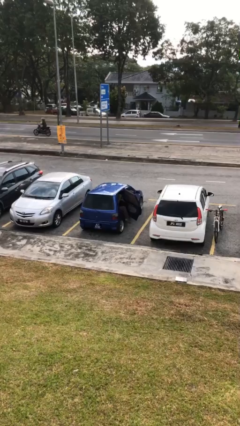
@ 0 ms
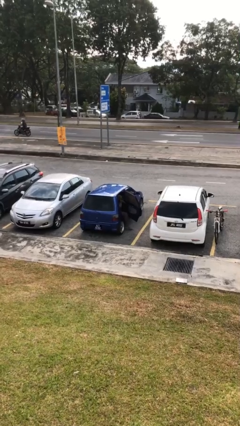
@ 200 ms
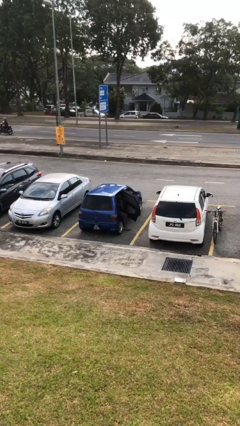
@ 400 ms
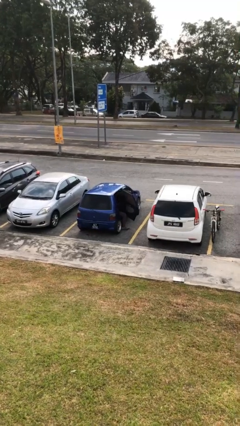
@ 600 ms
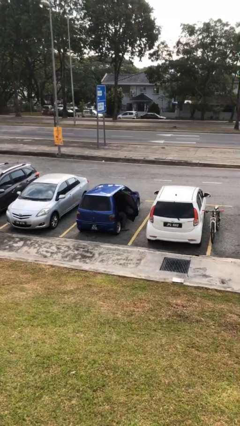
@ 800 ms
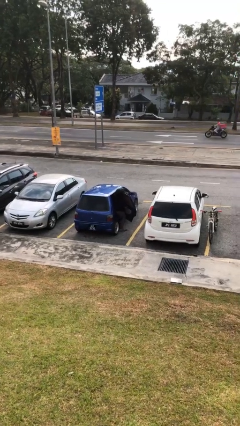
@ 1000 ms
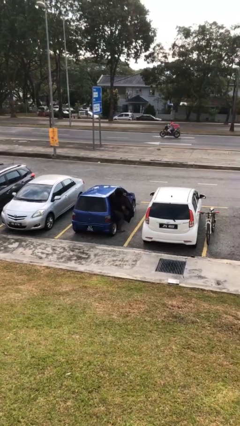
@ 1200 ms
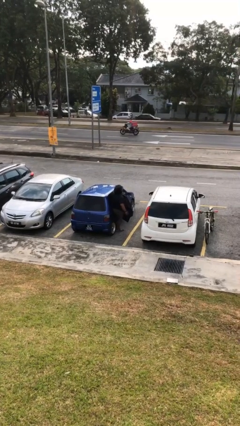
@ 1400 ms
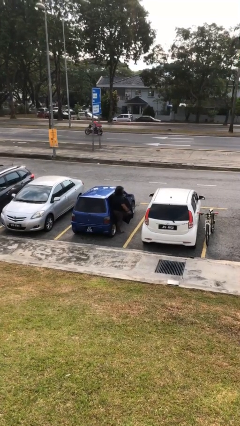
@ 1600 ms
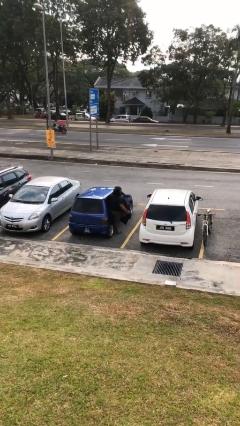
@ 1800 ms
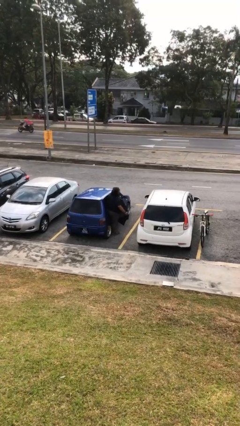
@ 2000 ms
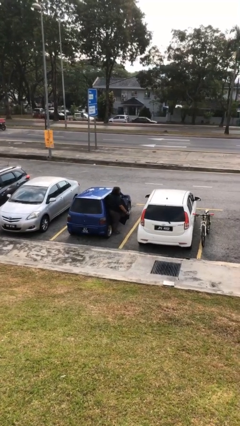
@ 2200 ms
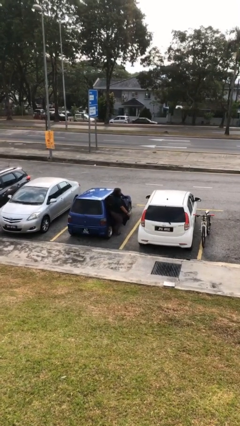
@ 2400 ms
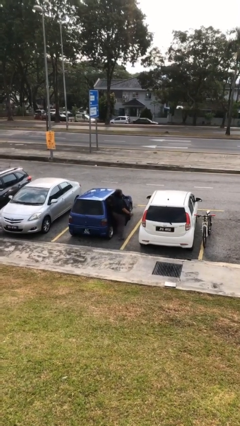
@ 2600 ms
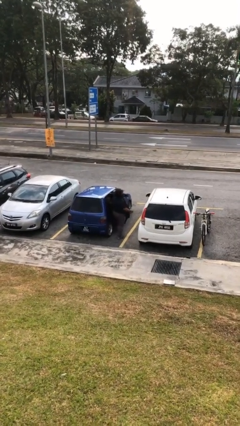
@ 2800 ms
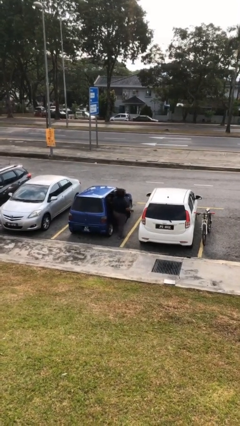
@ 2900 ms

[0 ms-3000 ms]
person exits car

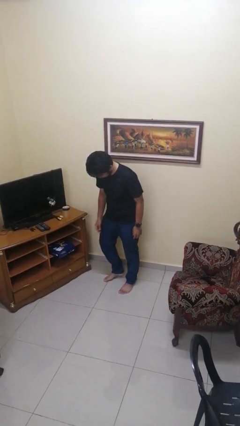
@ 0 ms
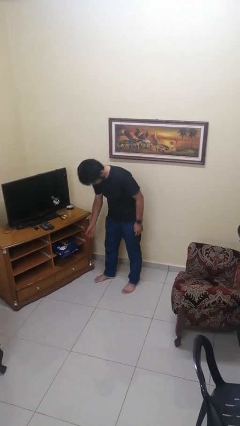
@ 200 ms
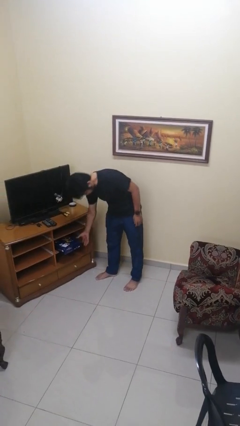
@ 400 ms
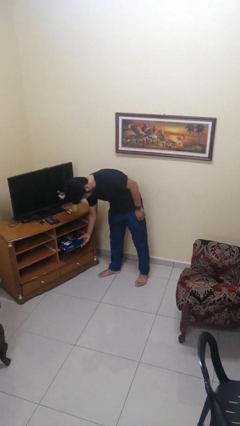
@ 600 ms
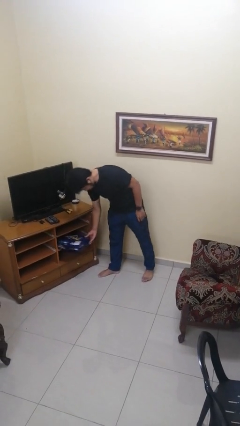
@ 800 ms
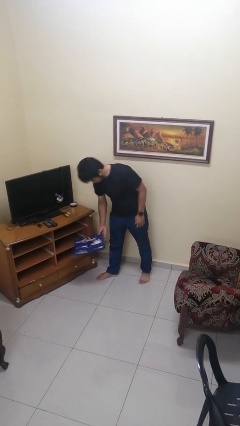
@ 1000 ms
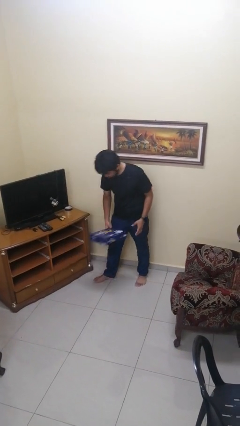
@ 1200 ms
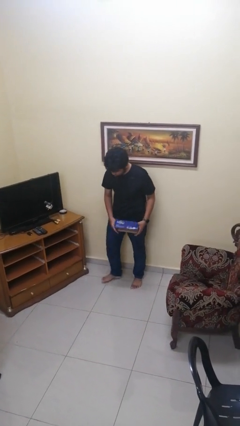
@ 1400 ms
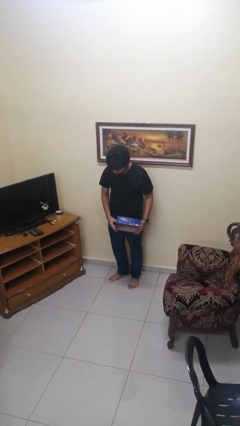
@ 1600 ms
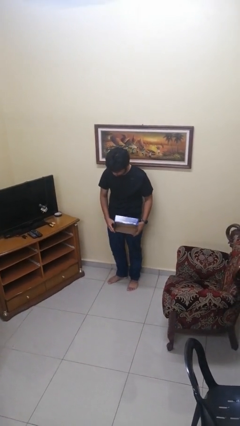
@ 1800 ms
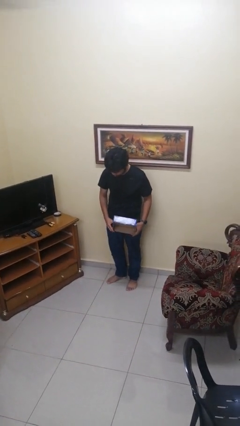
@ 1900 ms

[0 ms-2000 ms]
person picks up object from cabinet

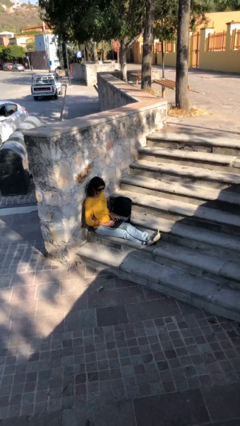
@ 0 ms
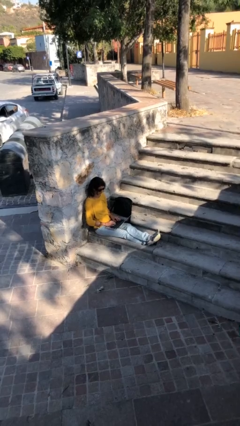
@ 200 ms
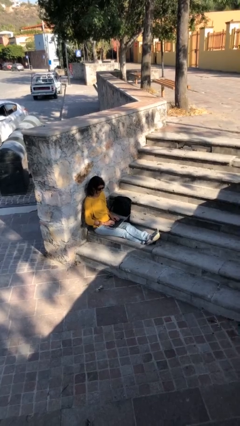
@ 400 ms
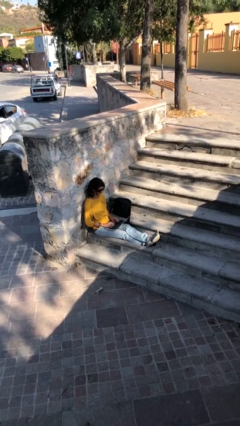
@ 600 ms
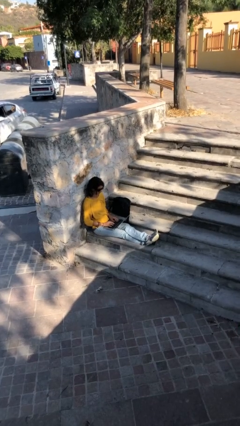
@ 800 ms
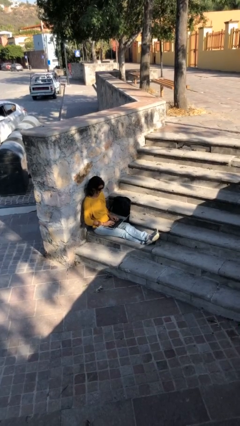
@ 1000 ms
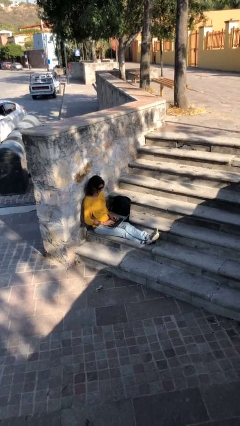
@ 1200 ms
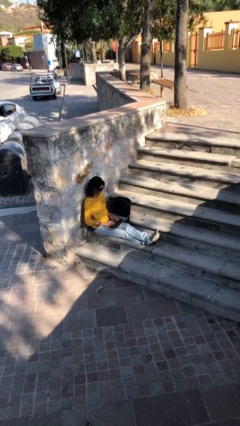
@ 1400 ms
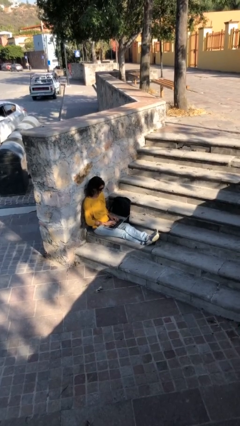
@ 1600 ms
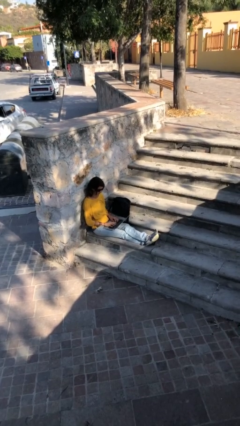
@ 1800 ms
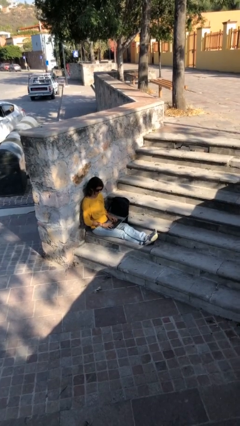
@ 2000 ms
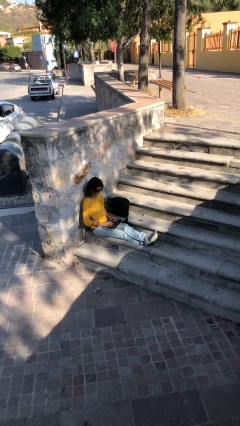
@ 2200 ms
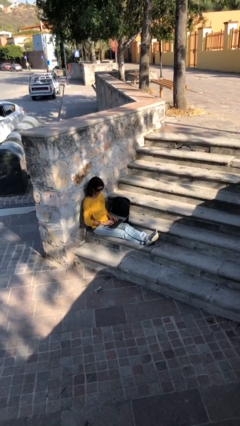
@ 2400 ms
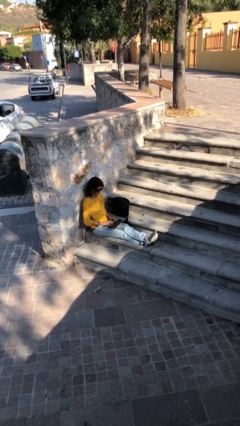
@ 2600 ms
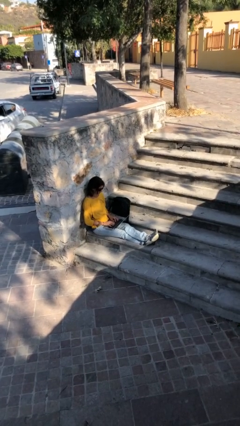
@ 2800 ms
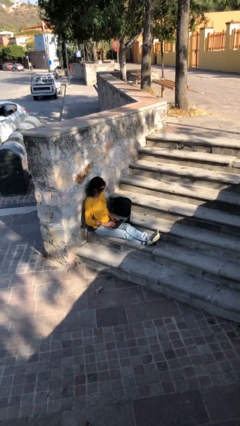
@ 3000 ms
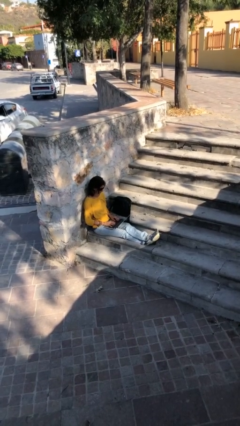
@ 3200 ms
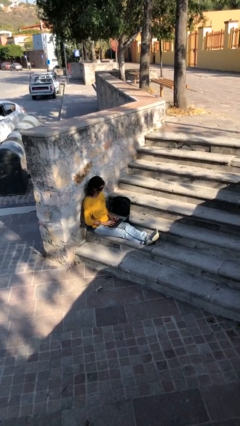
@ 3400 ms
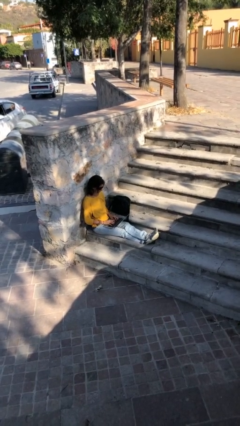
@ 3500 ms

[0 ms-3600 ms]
person interacts with laptop

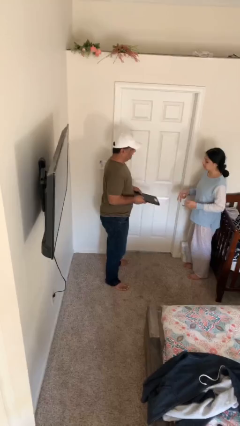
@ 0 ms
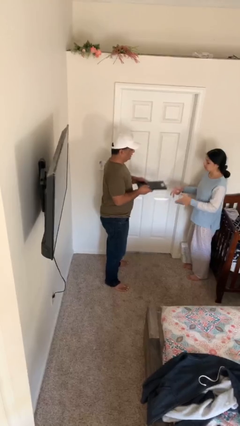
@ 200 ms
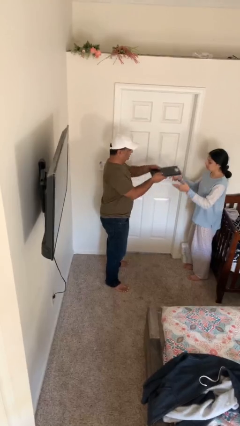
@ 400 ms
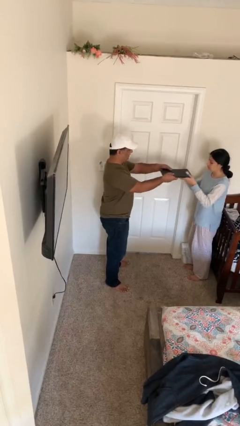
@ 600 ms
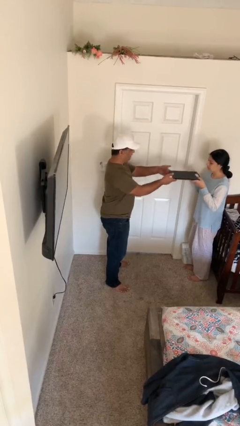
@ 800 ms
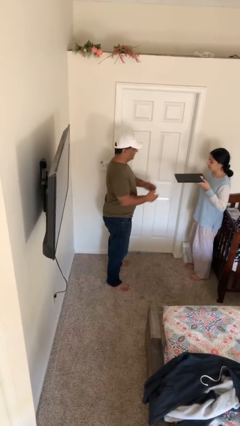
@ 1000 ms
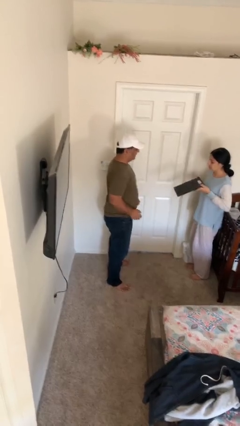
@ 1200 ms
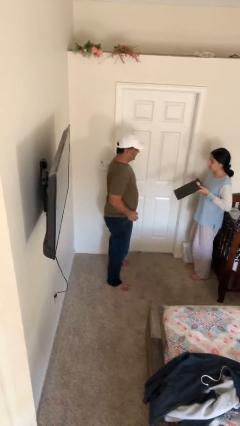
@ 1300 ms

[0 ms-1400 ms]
person transfers object to person

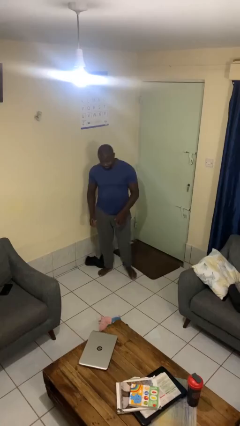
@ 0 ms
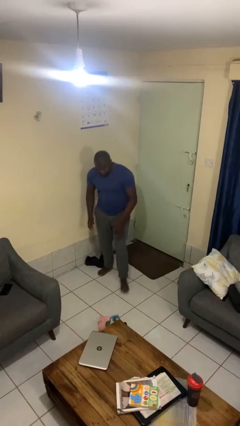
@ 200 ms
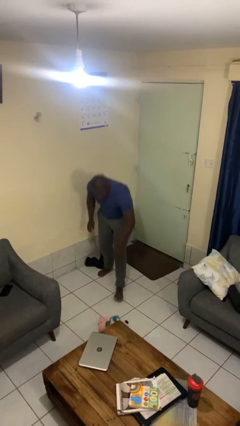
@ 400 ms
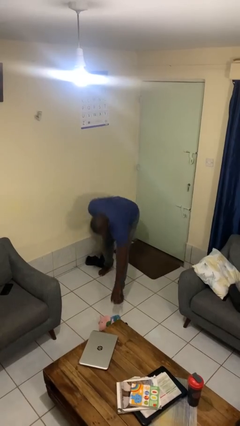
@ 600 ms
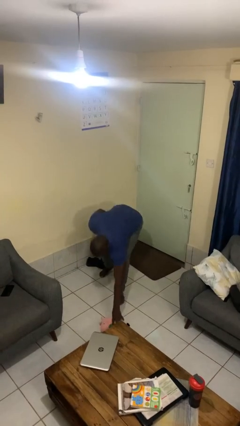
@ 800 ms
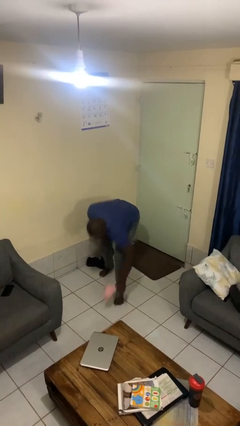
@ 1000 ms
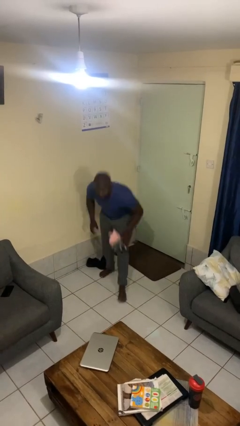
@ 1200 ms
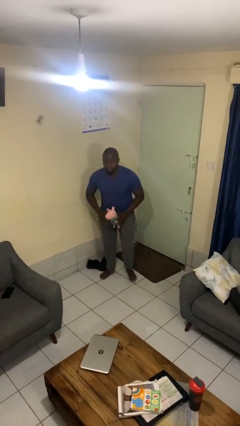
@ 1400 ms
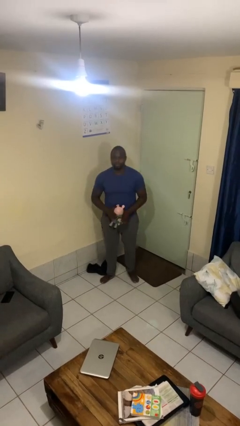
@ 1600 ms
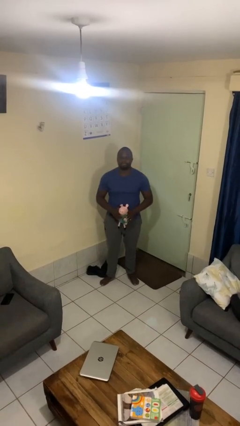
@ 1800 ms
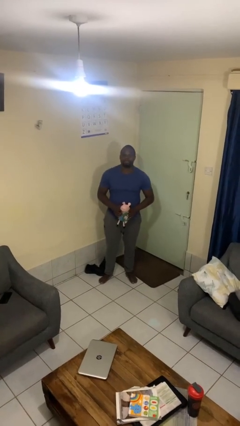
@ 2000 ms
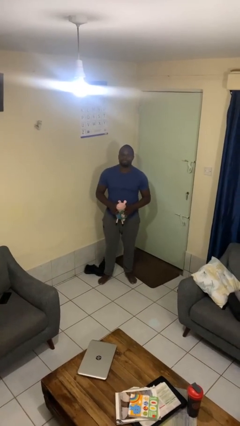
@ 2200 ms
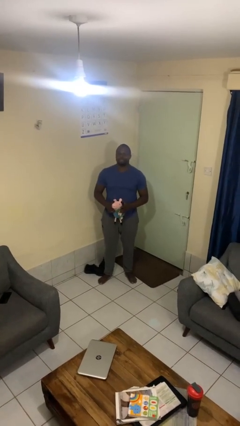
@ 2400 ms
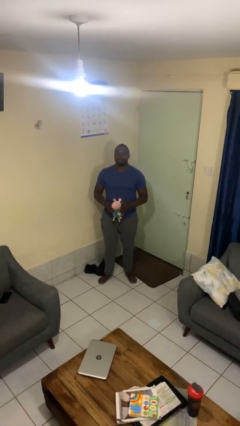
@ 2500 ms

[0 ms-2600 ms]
person picks up object from floor

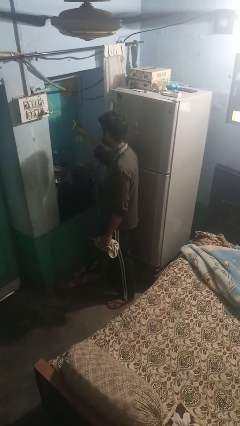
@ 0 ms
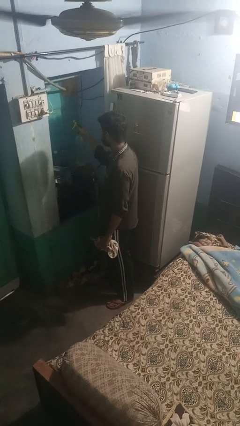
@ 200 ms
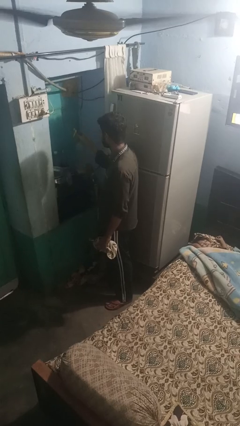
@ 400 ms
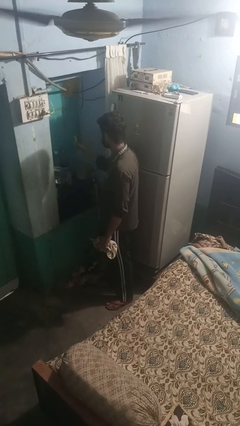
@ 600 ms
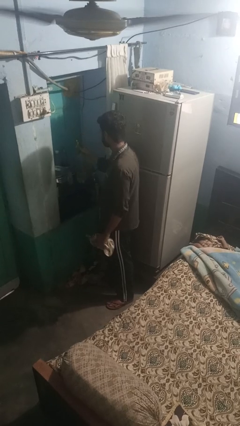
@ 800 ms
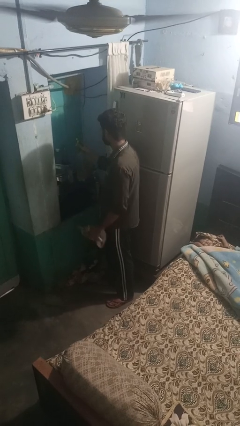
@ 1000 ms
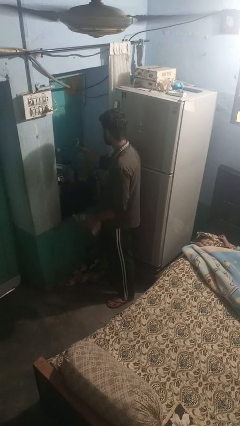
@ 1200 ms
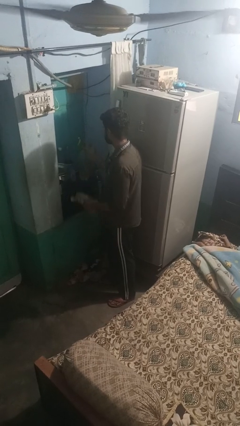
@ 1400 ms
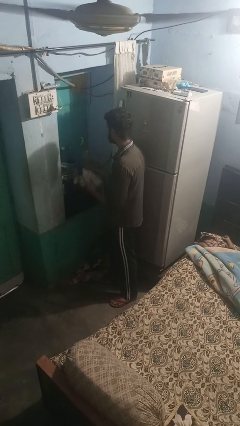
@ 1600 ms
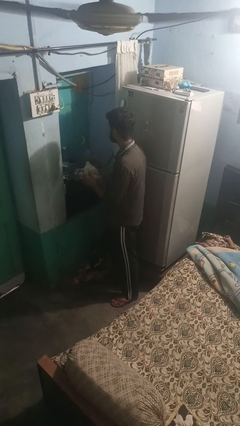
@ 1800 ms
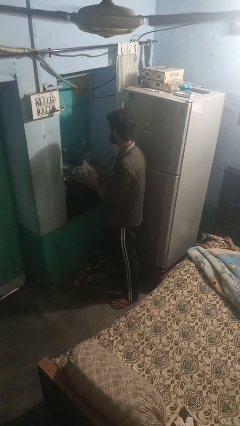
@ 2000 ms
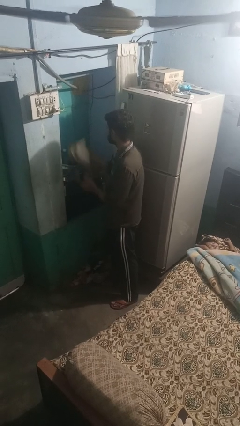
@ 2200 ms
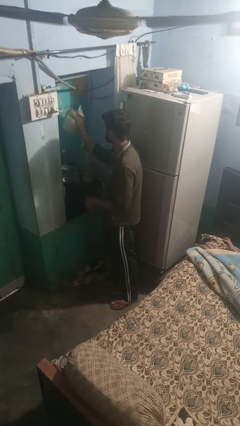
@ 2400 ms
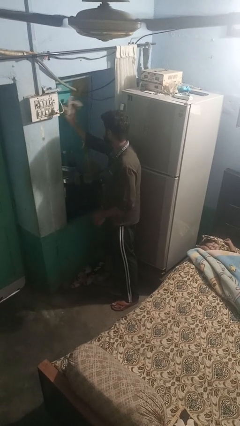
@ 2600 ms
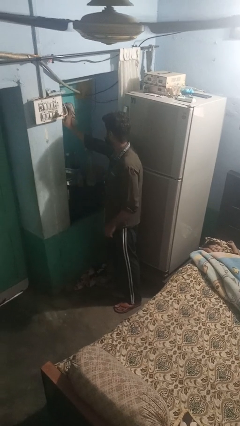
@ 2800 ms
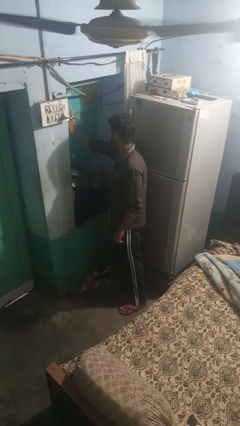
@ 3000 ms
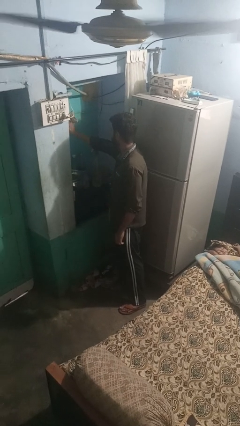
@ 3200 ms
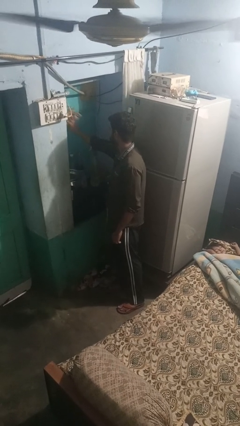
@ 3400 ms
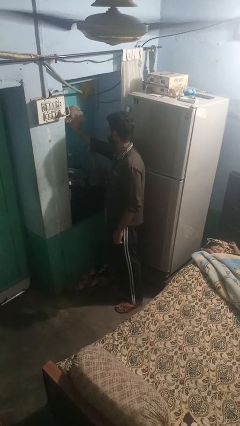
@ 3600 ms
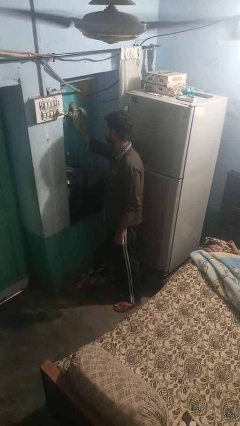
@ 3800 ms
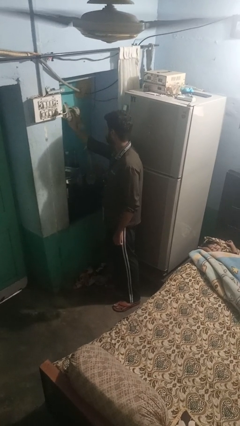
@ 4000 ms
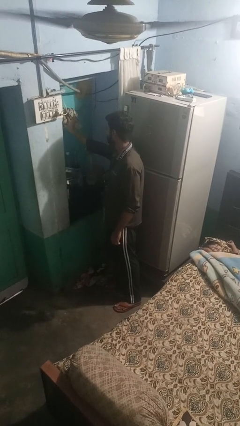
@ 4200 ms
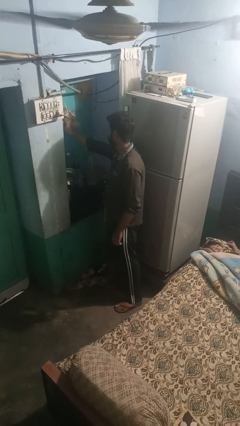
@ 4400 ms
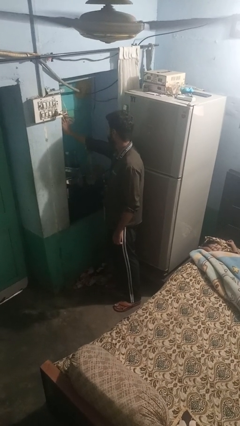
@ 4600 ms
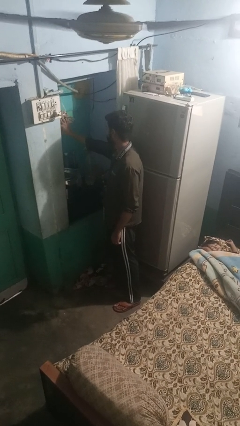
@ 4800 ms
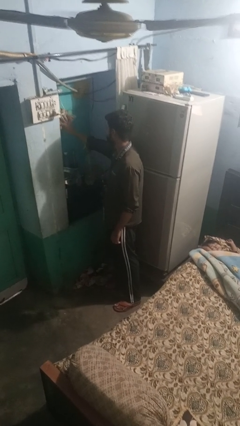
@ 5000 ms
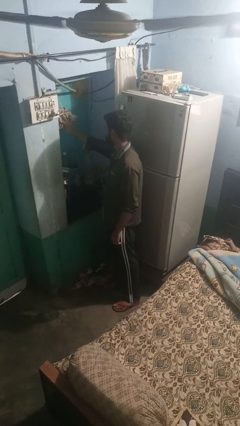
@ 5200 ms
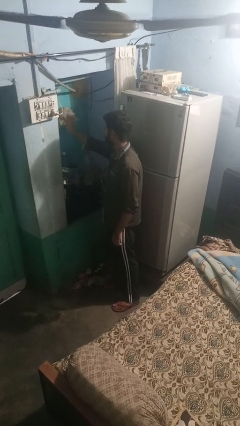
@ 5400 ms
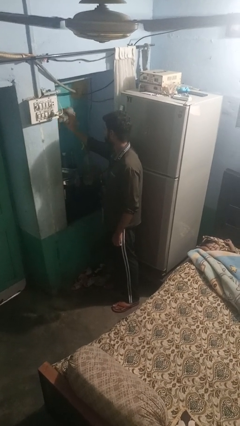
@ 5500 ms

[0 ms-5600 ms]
person washes window
